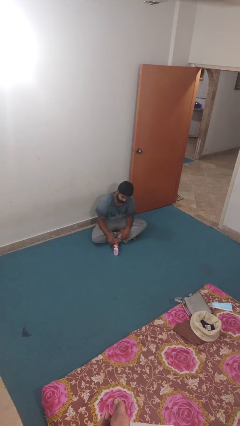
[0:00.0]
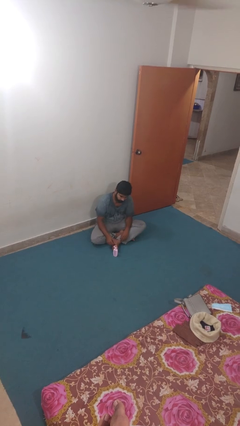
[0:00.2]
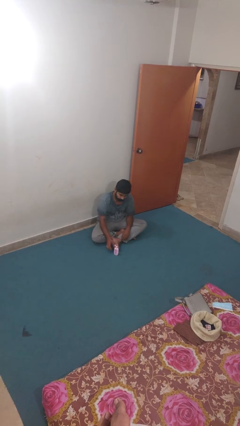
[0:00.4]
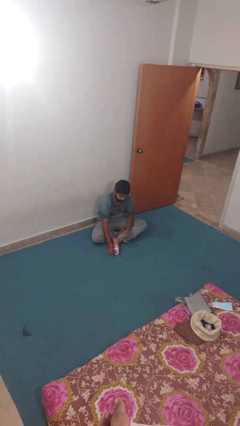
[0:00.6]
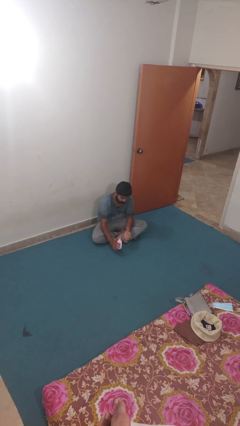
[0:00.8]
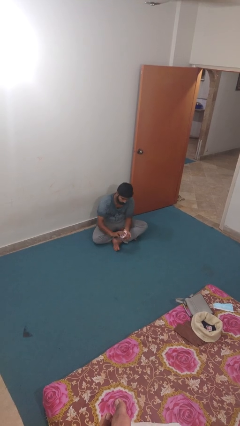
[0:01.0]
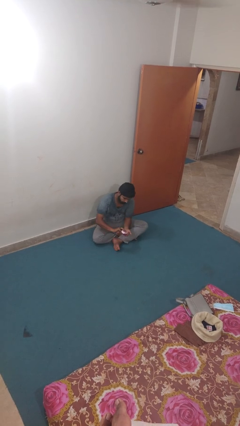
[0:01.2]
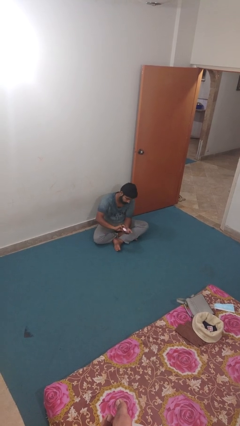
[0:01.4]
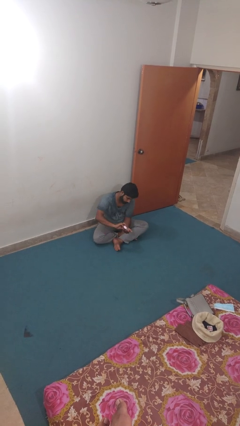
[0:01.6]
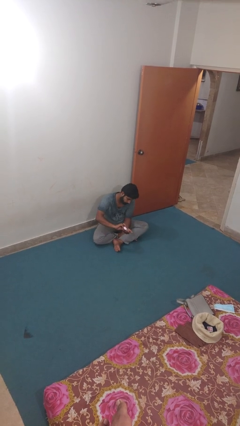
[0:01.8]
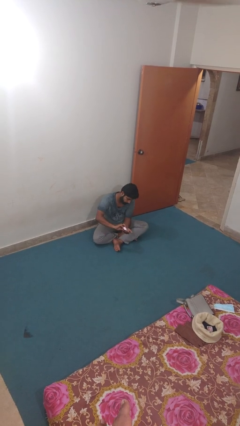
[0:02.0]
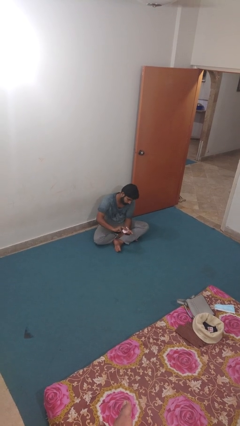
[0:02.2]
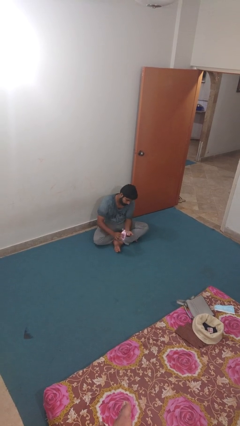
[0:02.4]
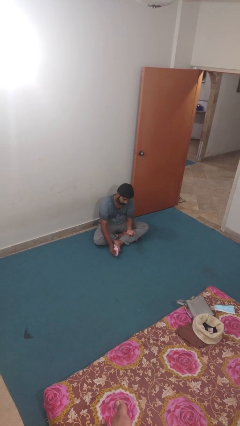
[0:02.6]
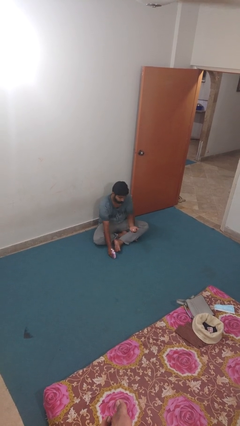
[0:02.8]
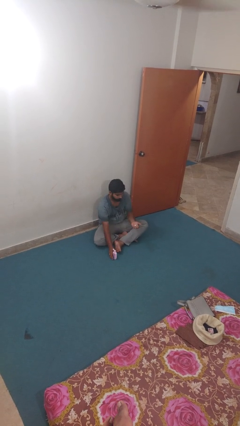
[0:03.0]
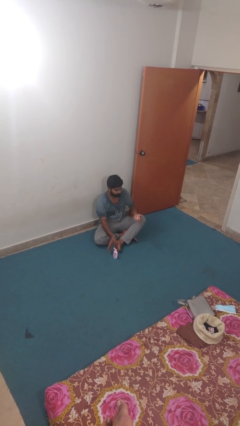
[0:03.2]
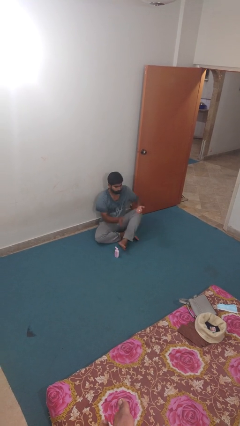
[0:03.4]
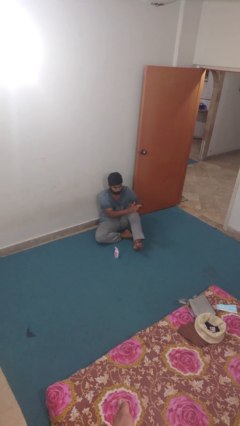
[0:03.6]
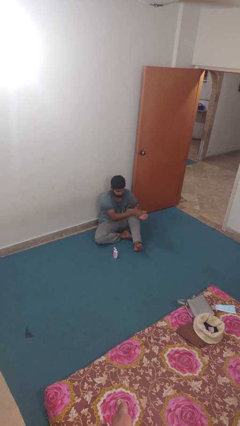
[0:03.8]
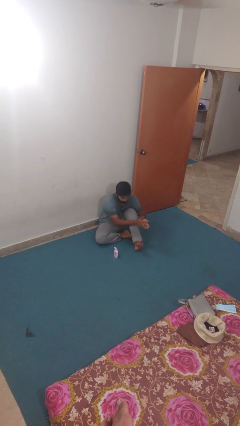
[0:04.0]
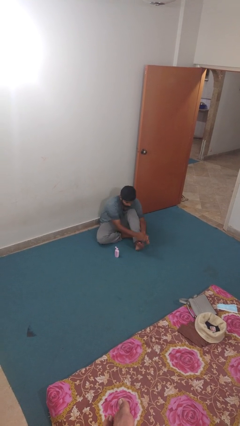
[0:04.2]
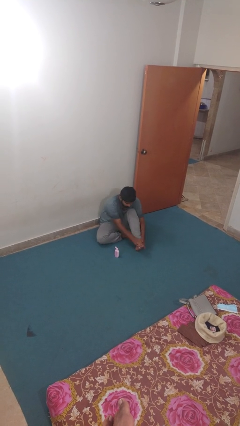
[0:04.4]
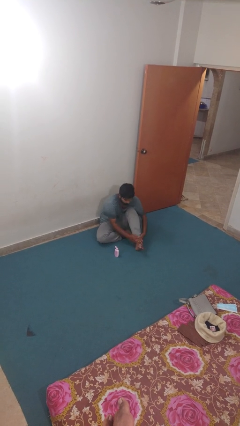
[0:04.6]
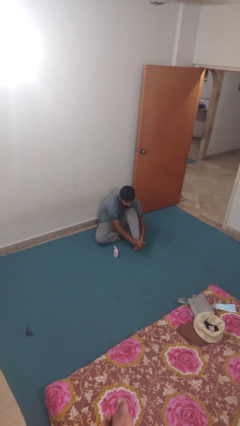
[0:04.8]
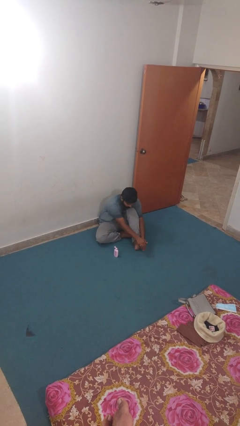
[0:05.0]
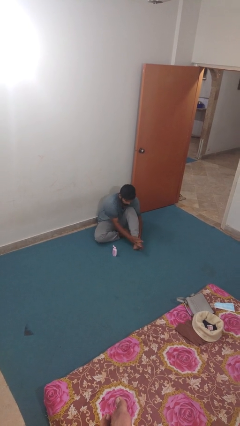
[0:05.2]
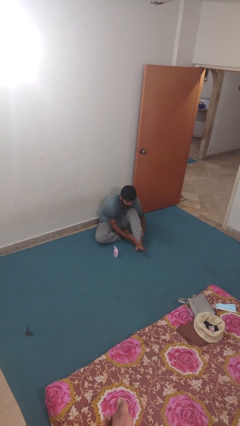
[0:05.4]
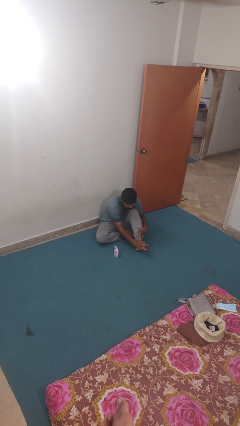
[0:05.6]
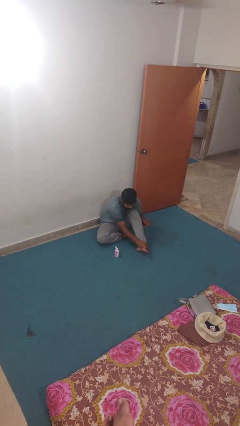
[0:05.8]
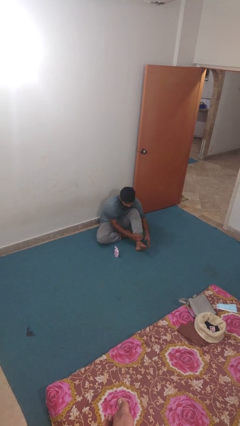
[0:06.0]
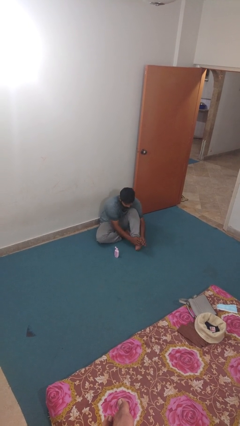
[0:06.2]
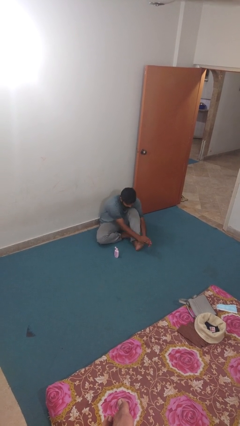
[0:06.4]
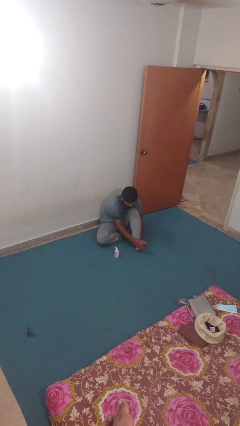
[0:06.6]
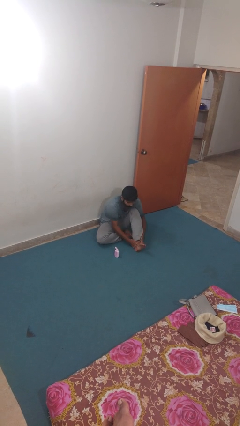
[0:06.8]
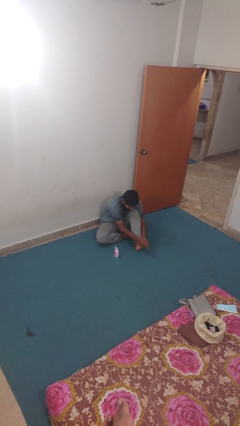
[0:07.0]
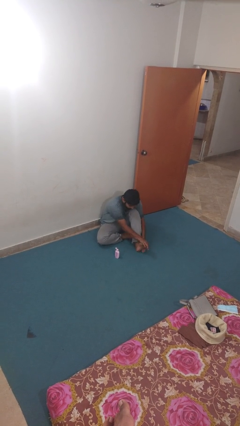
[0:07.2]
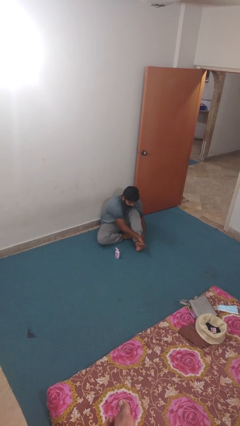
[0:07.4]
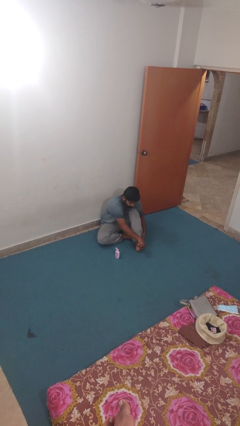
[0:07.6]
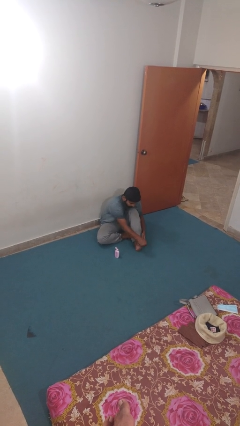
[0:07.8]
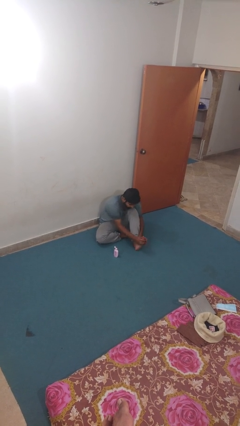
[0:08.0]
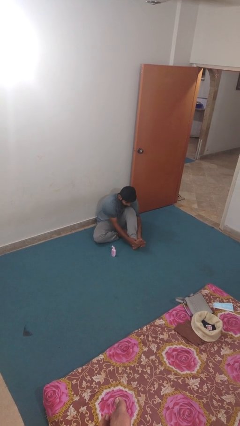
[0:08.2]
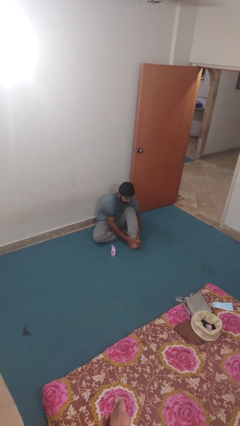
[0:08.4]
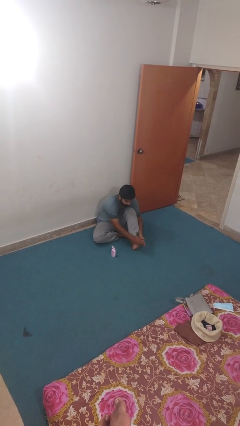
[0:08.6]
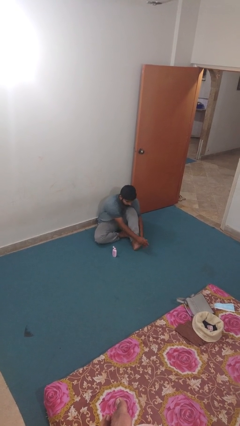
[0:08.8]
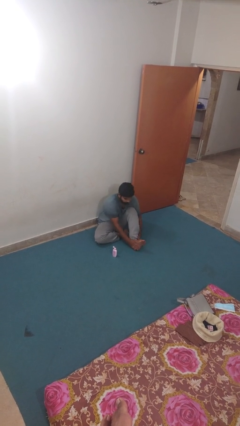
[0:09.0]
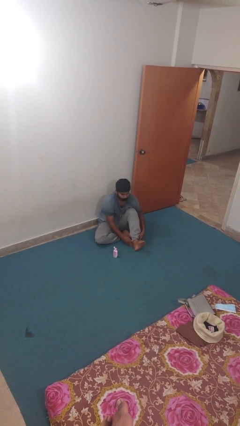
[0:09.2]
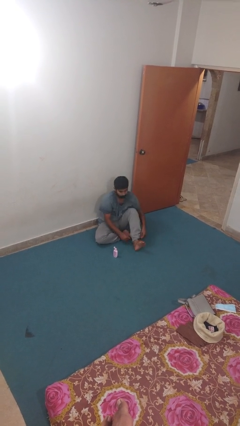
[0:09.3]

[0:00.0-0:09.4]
person applies sunscreen

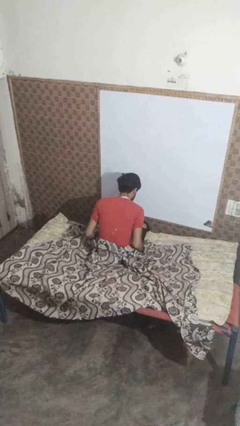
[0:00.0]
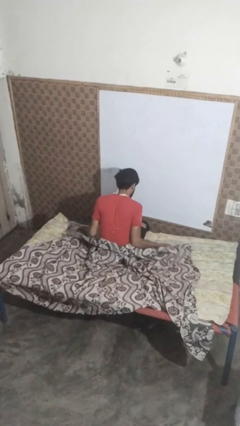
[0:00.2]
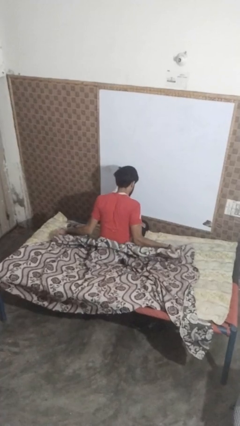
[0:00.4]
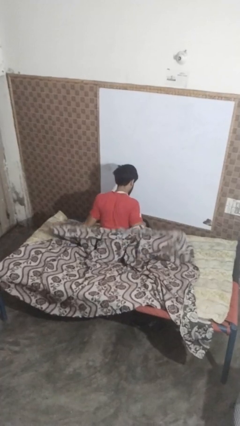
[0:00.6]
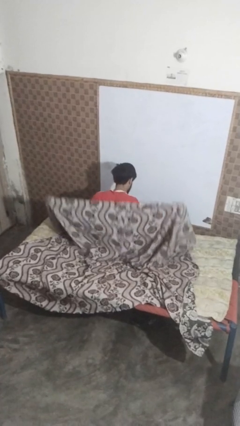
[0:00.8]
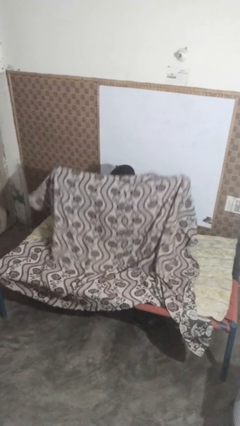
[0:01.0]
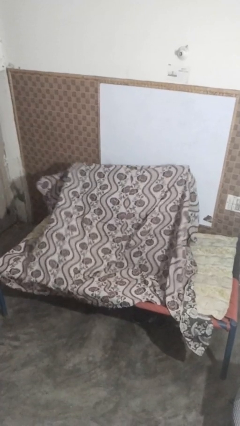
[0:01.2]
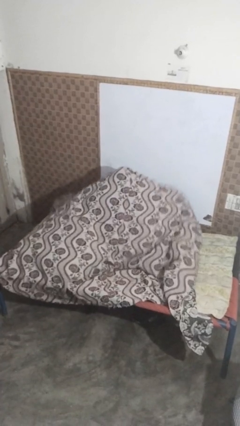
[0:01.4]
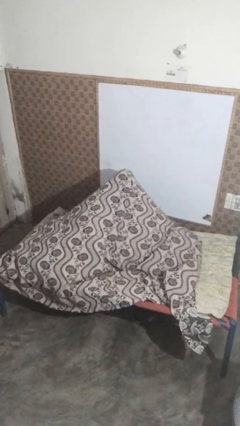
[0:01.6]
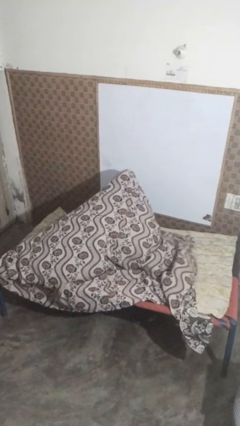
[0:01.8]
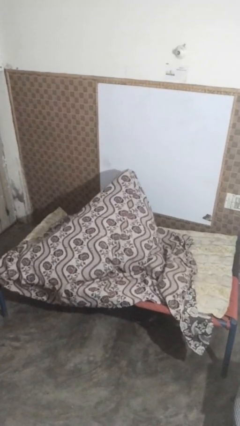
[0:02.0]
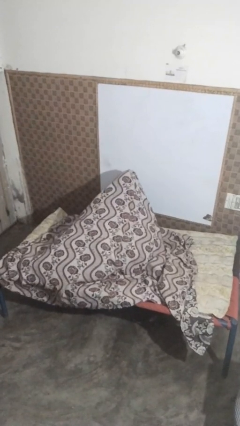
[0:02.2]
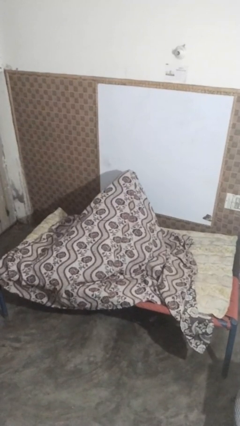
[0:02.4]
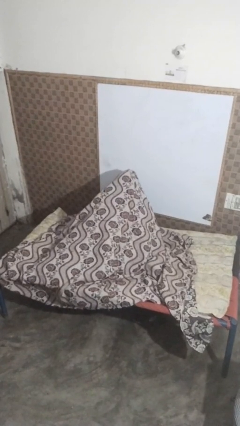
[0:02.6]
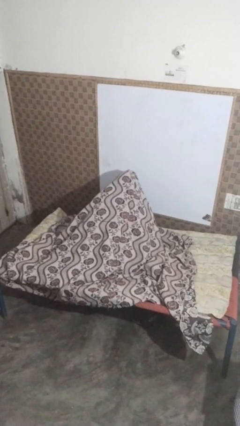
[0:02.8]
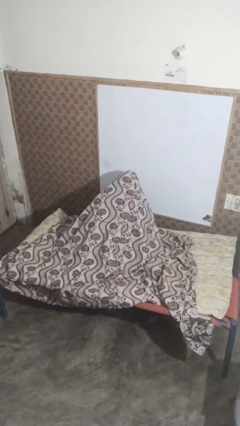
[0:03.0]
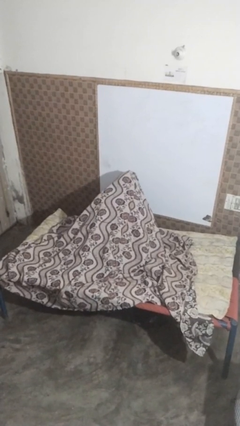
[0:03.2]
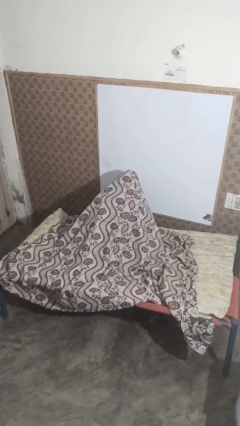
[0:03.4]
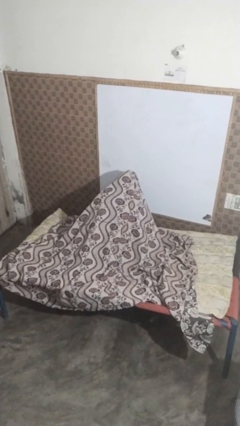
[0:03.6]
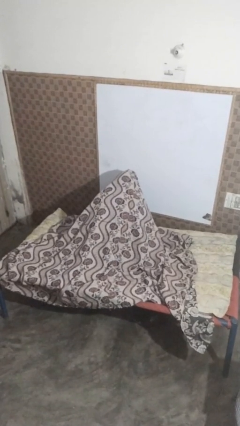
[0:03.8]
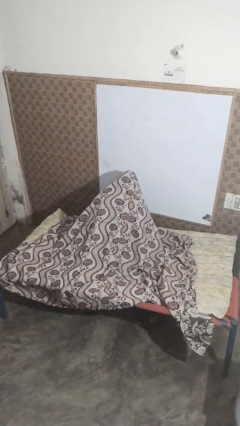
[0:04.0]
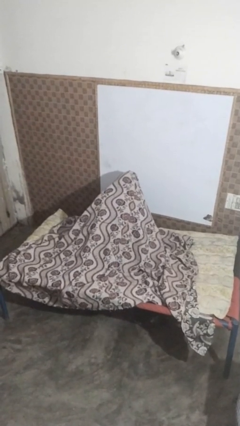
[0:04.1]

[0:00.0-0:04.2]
person covers with blanket

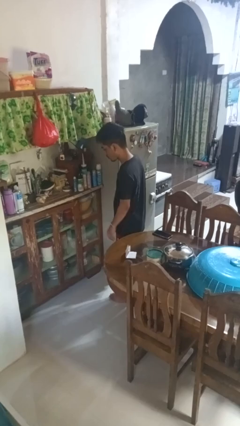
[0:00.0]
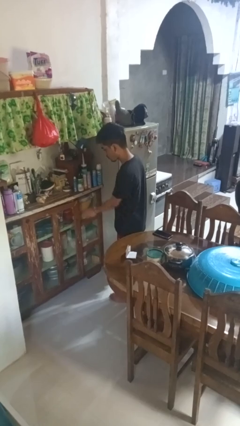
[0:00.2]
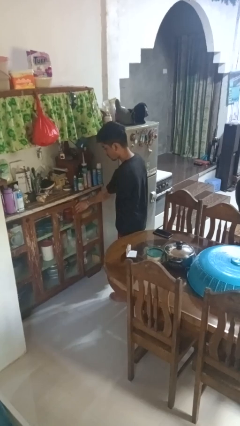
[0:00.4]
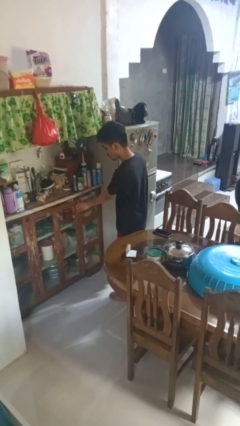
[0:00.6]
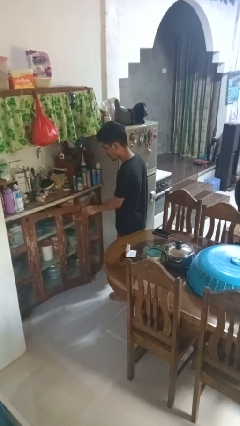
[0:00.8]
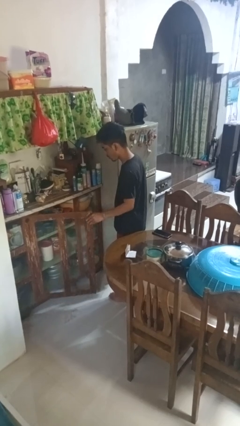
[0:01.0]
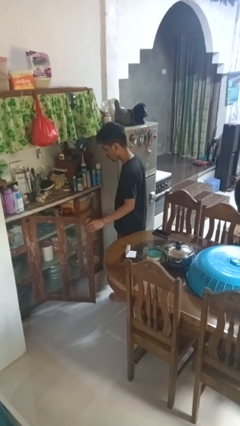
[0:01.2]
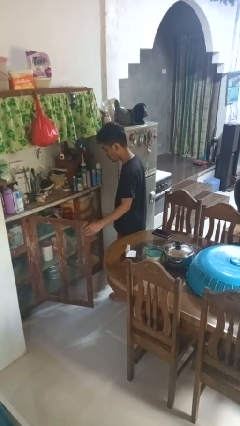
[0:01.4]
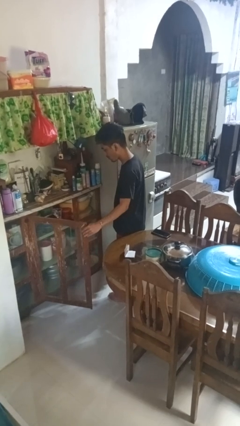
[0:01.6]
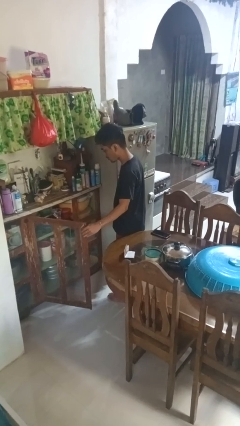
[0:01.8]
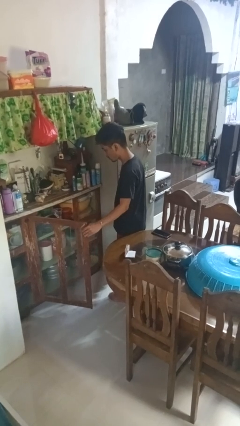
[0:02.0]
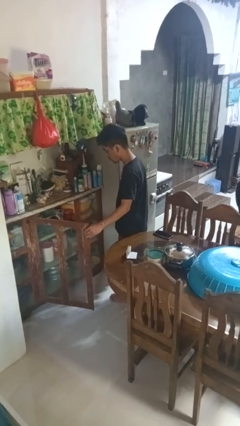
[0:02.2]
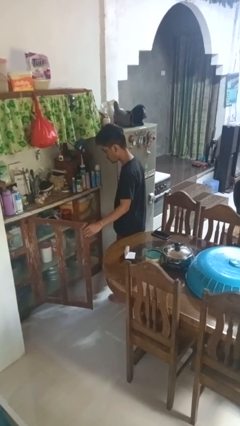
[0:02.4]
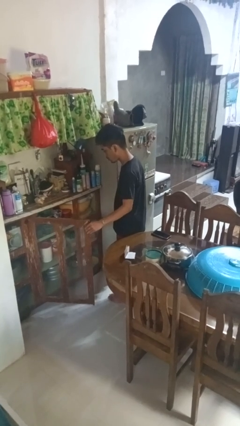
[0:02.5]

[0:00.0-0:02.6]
person opens cabinet

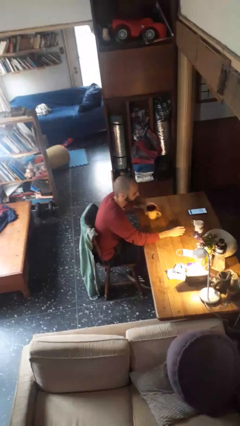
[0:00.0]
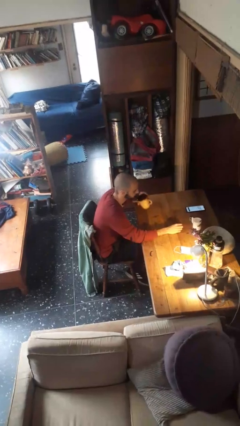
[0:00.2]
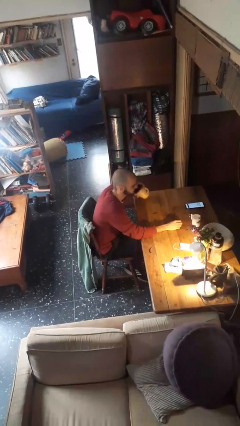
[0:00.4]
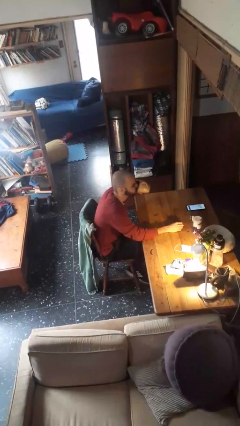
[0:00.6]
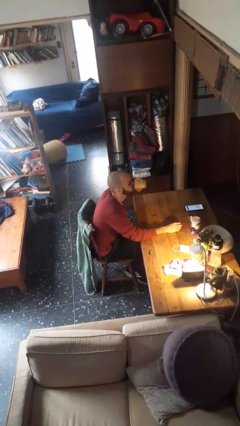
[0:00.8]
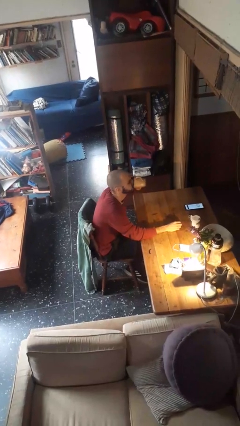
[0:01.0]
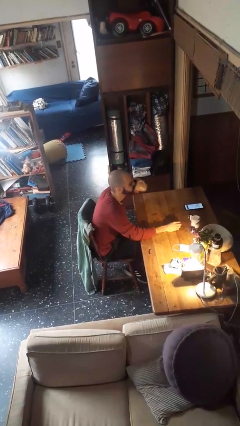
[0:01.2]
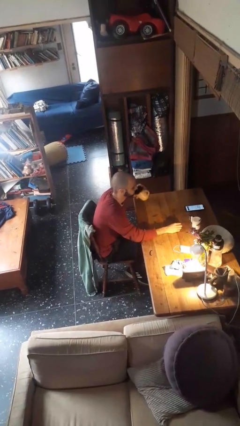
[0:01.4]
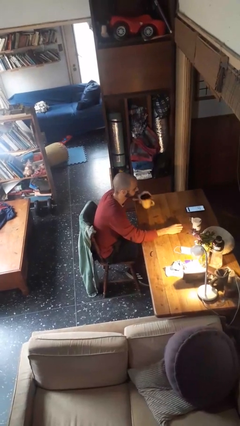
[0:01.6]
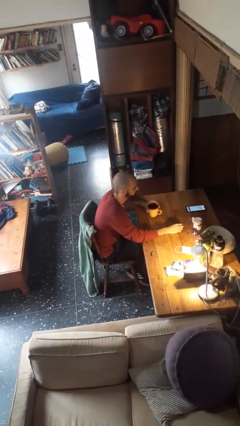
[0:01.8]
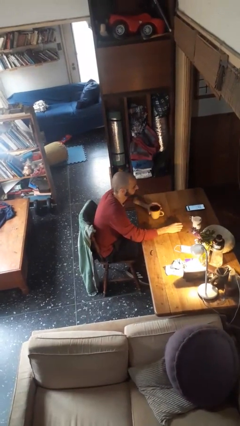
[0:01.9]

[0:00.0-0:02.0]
person drinks from mug
